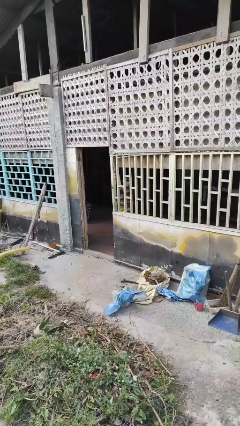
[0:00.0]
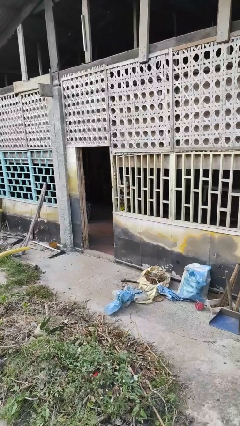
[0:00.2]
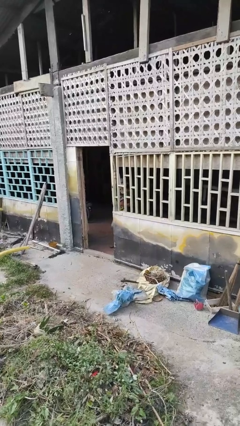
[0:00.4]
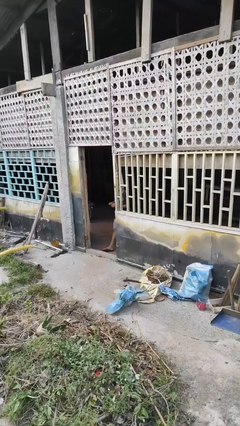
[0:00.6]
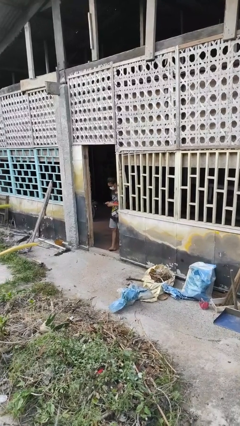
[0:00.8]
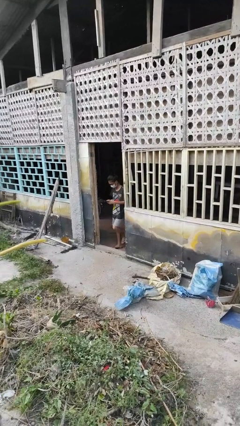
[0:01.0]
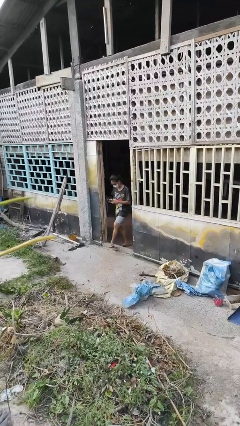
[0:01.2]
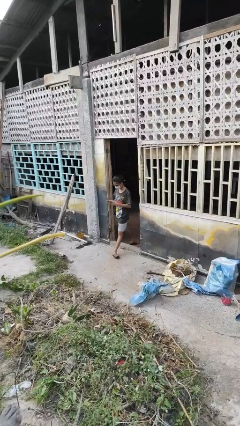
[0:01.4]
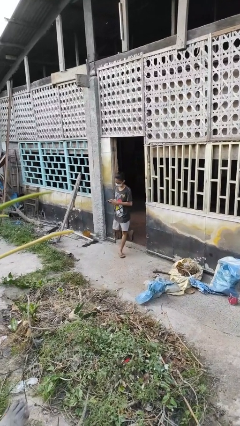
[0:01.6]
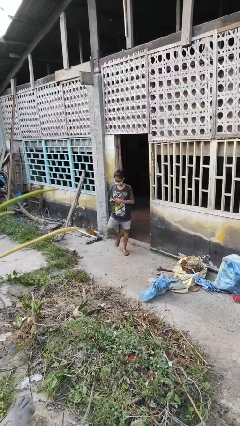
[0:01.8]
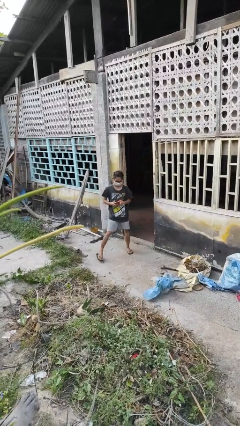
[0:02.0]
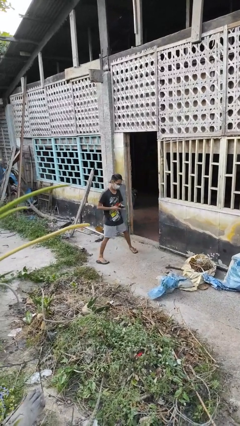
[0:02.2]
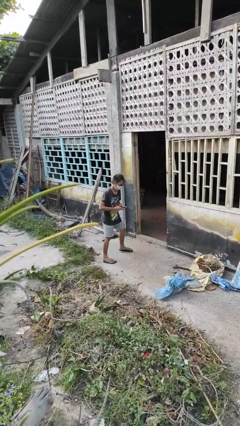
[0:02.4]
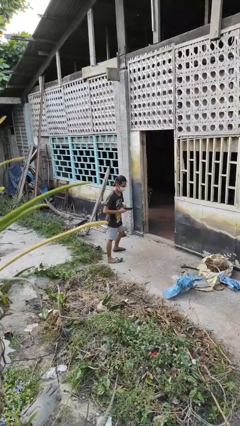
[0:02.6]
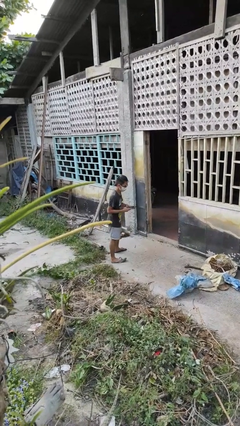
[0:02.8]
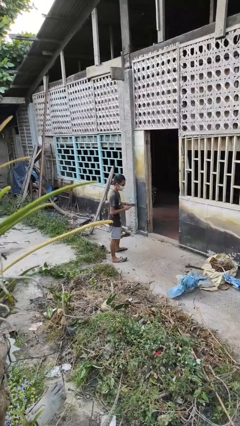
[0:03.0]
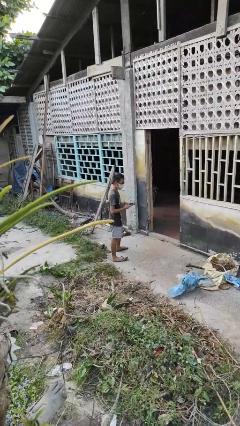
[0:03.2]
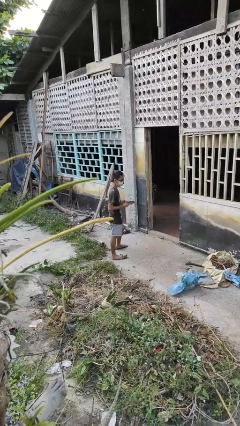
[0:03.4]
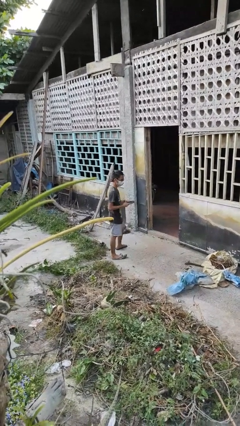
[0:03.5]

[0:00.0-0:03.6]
person enters scene through structure

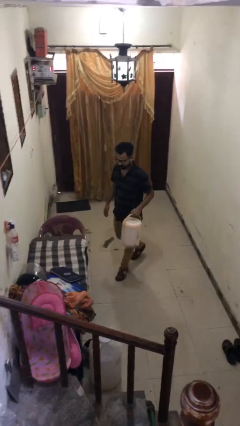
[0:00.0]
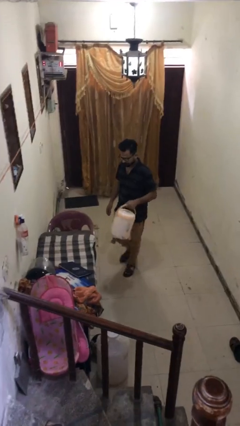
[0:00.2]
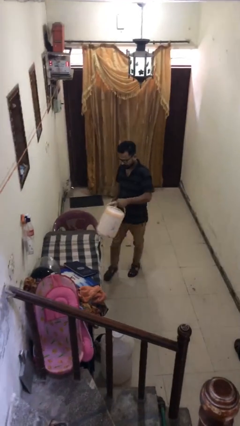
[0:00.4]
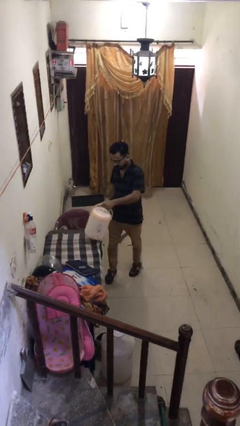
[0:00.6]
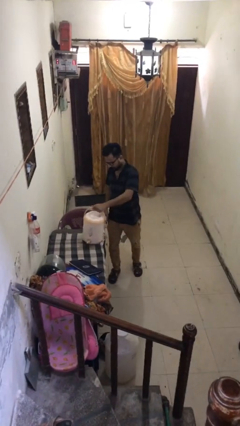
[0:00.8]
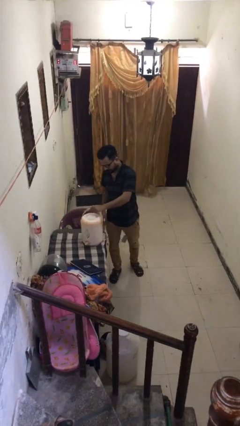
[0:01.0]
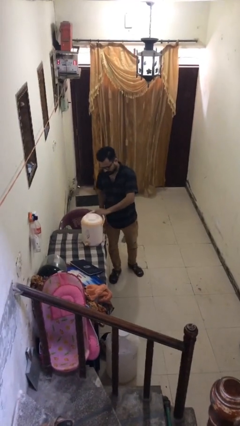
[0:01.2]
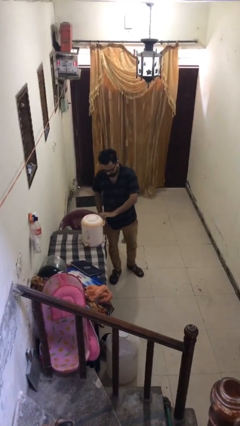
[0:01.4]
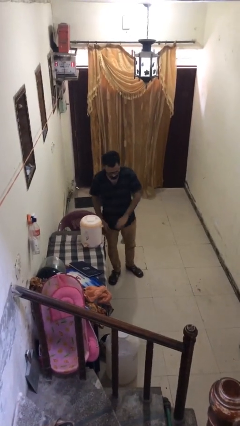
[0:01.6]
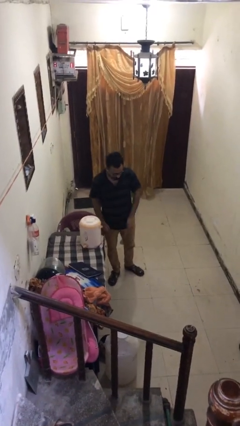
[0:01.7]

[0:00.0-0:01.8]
person puts down object on table

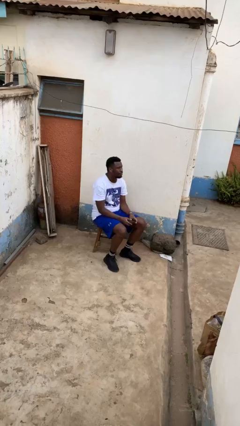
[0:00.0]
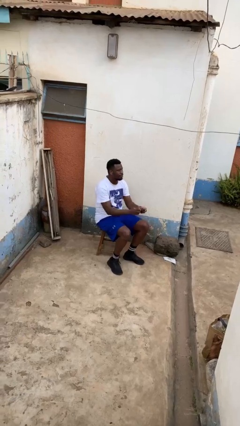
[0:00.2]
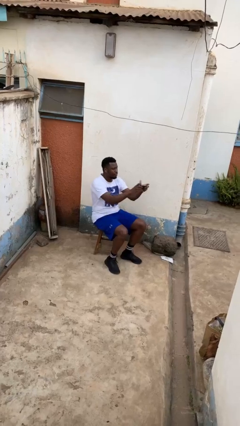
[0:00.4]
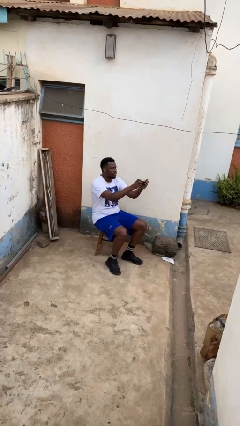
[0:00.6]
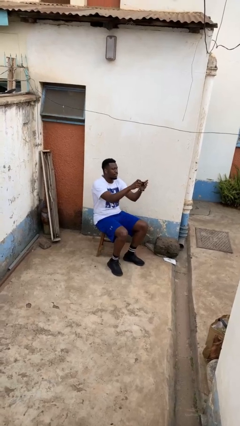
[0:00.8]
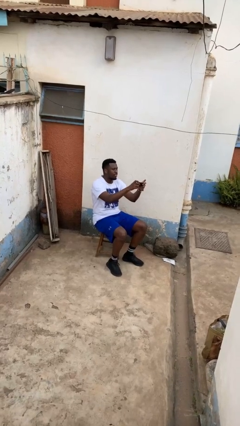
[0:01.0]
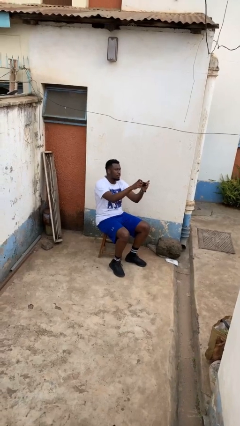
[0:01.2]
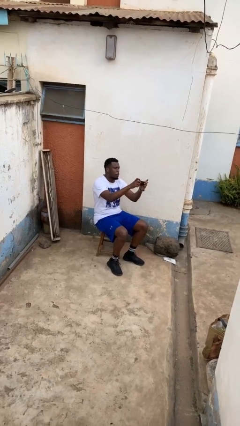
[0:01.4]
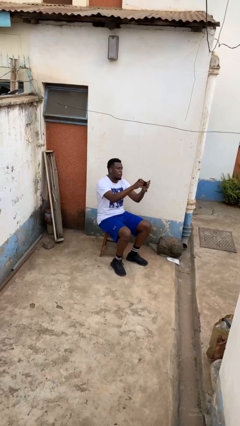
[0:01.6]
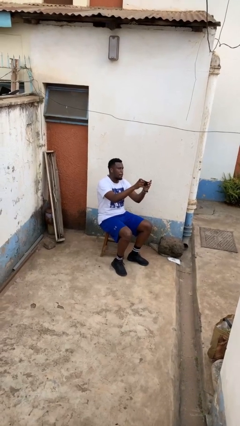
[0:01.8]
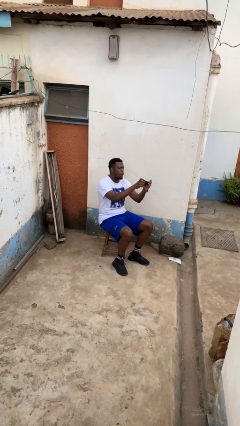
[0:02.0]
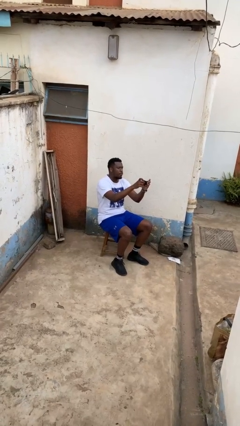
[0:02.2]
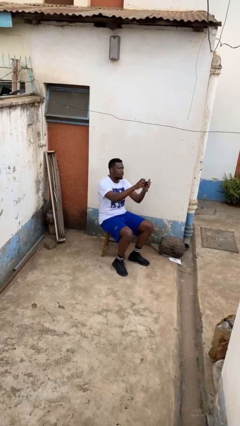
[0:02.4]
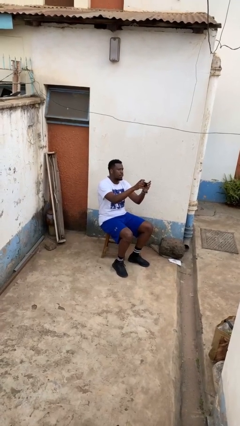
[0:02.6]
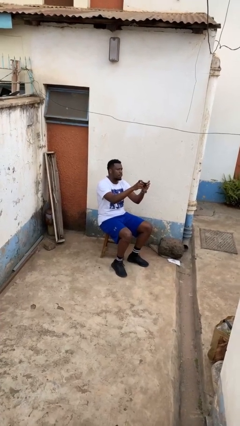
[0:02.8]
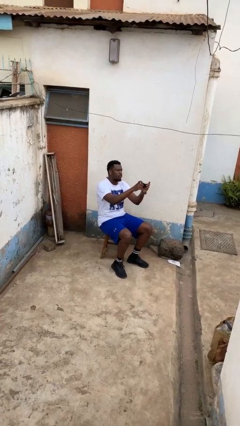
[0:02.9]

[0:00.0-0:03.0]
person interacts with handheld game

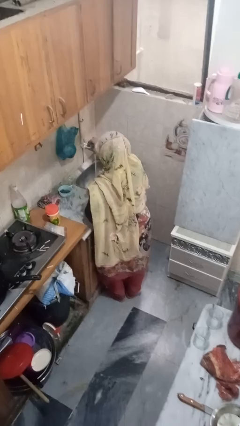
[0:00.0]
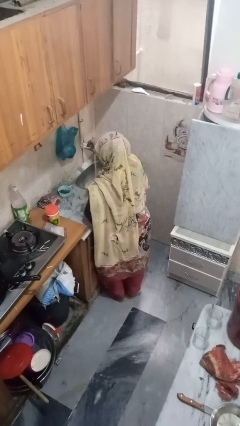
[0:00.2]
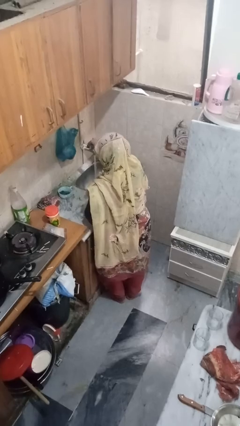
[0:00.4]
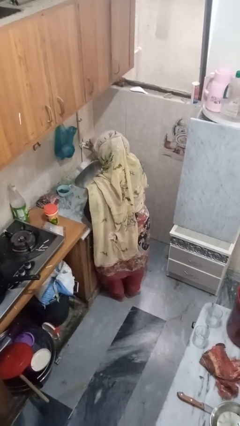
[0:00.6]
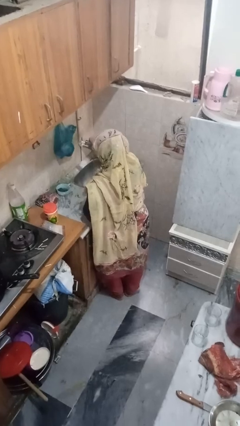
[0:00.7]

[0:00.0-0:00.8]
person turns off faucet

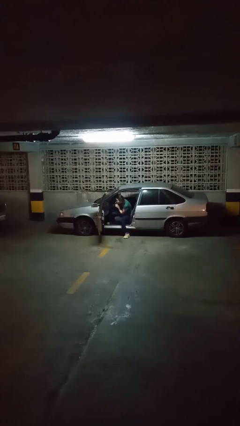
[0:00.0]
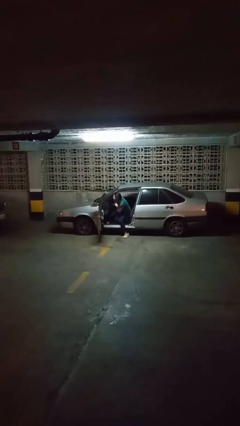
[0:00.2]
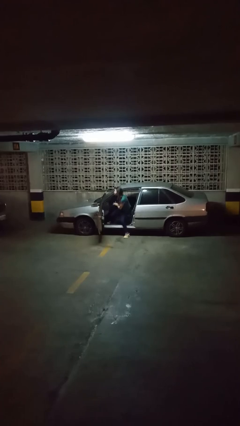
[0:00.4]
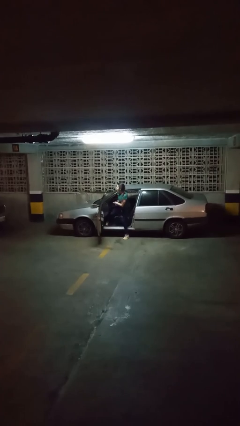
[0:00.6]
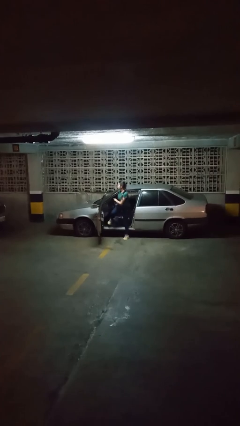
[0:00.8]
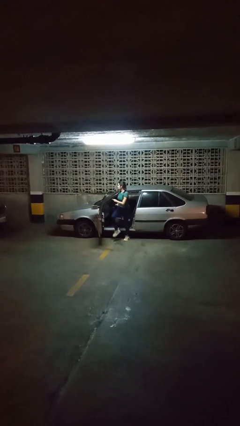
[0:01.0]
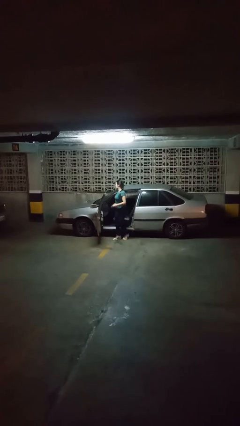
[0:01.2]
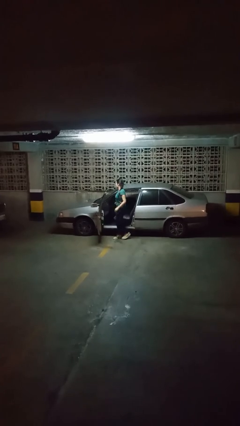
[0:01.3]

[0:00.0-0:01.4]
person exits car

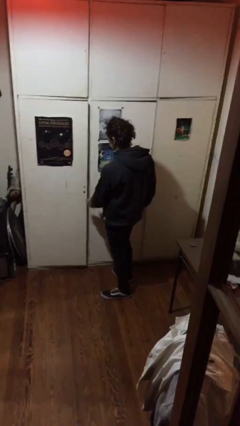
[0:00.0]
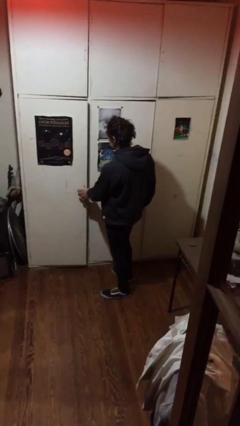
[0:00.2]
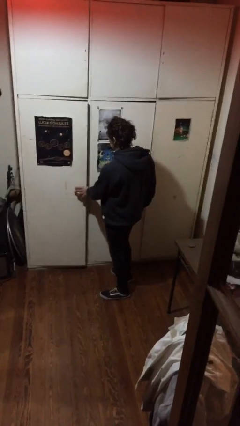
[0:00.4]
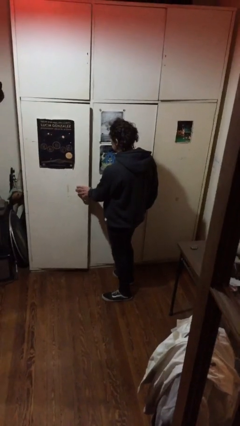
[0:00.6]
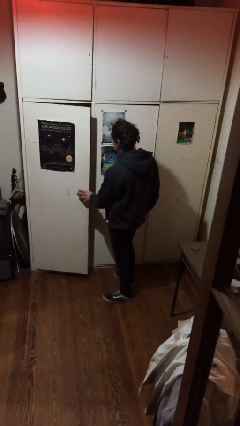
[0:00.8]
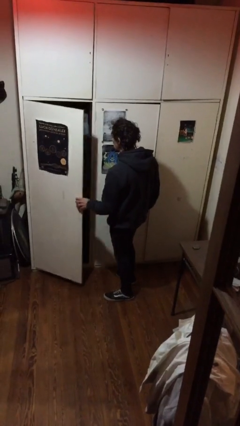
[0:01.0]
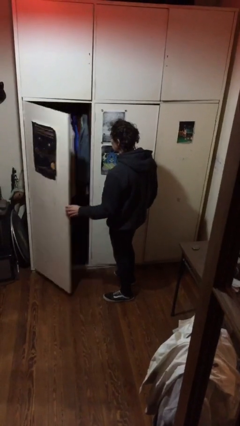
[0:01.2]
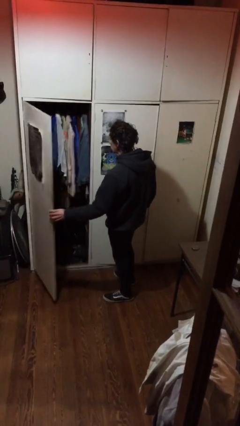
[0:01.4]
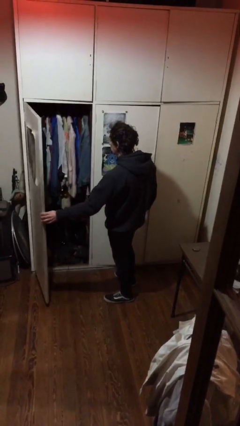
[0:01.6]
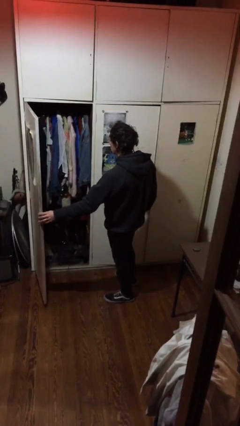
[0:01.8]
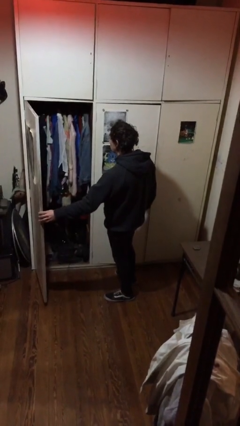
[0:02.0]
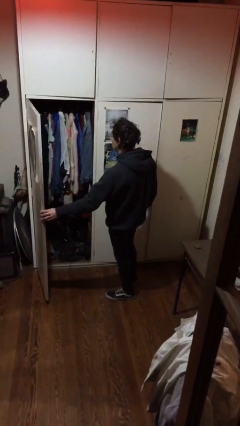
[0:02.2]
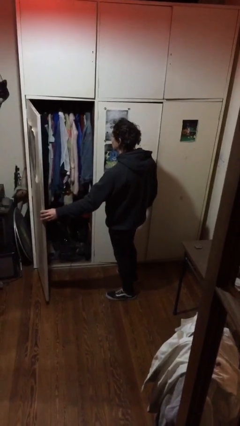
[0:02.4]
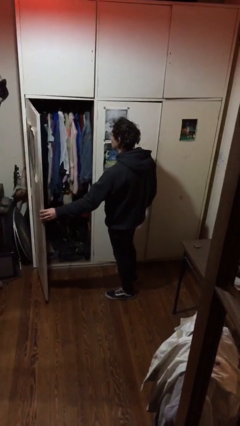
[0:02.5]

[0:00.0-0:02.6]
person opens closet door

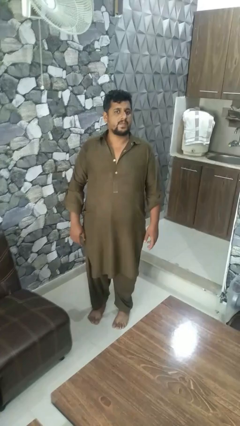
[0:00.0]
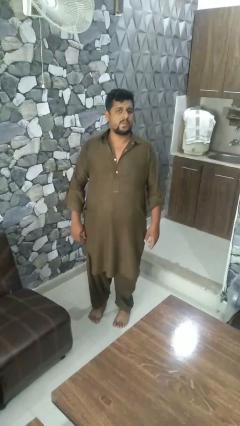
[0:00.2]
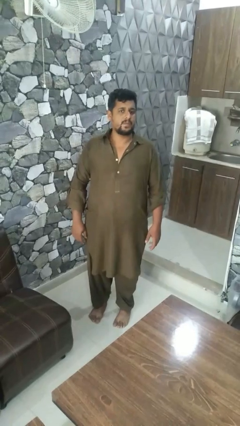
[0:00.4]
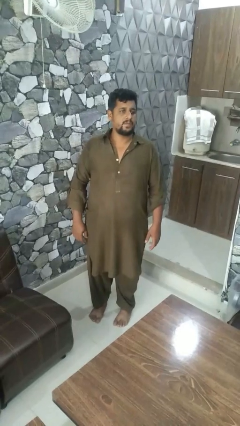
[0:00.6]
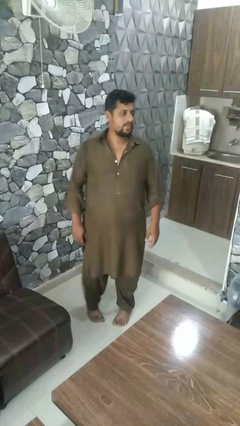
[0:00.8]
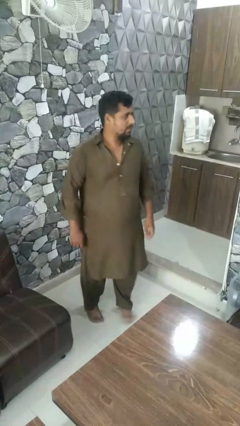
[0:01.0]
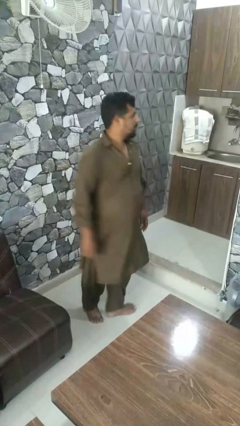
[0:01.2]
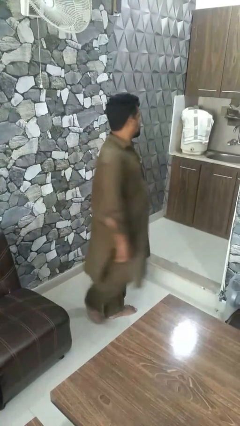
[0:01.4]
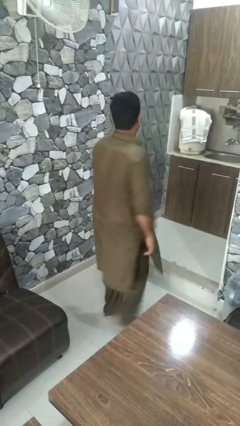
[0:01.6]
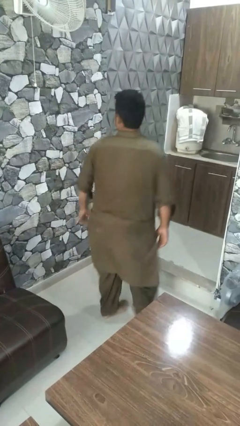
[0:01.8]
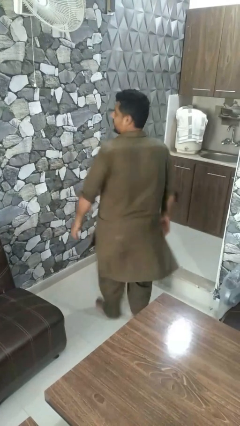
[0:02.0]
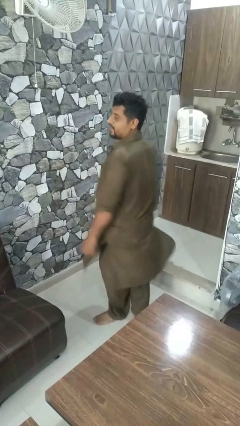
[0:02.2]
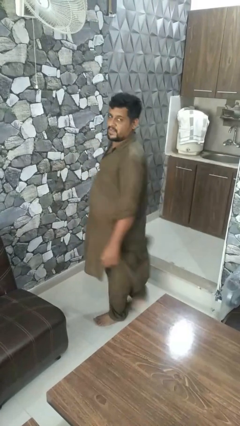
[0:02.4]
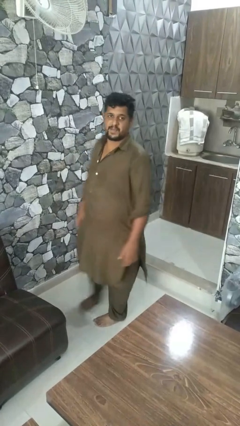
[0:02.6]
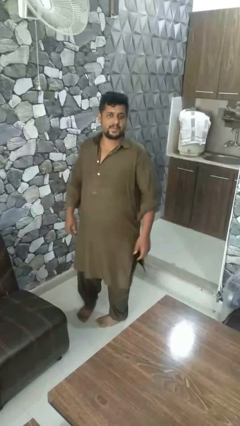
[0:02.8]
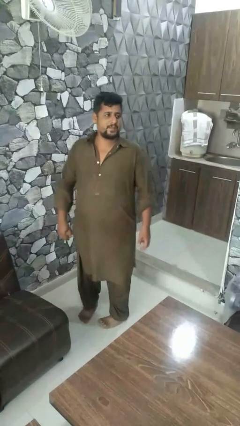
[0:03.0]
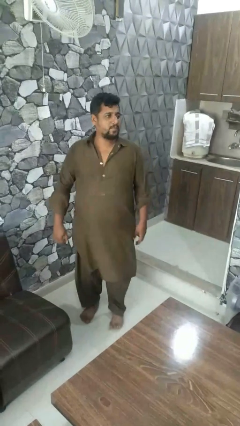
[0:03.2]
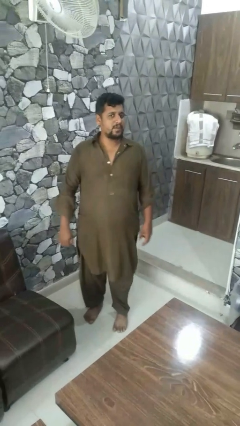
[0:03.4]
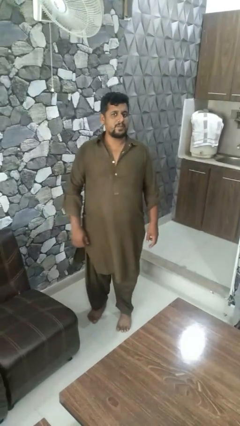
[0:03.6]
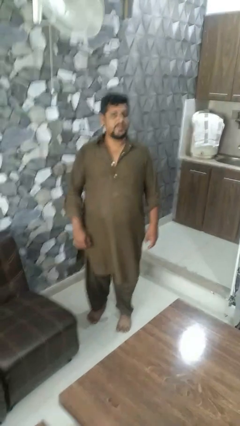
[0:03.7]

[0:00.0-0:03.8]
person twirls
